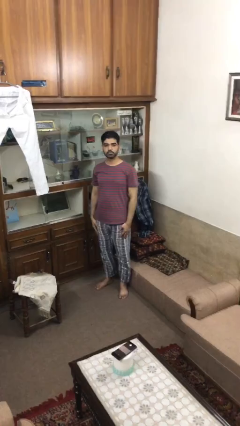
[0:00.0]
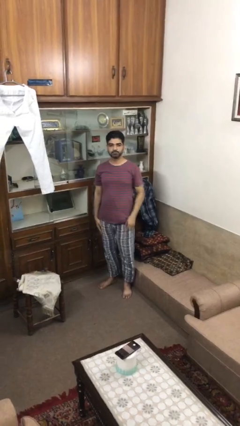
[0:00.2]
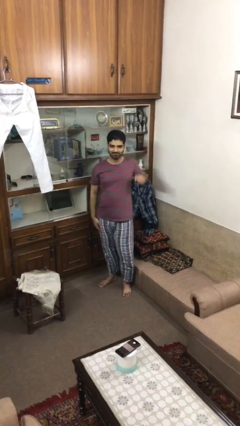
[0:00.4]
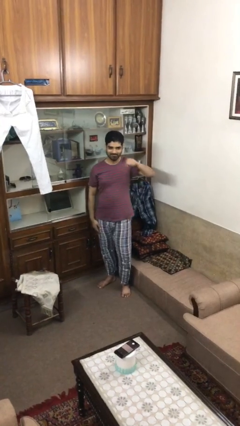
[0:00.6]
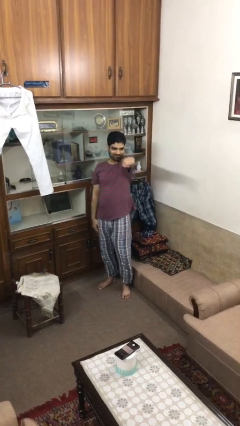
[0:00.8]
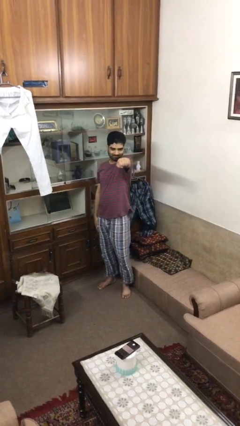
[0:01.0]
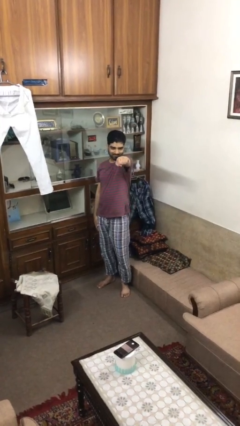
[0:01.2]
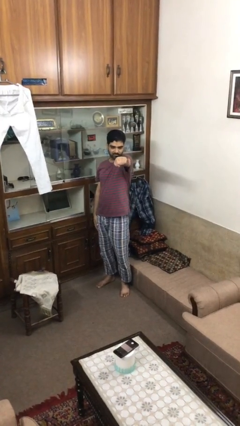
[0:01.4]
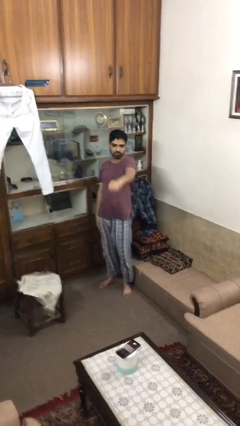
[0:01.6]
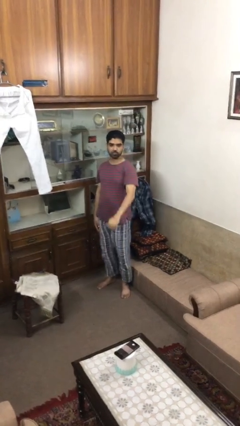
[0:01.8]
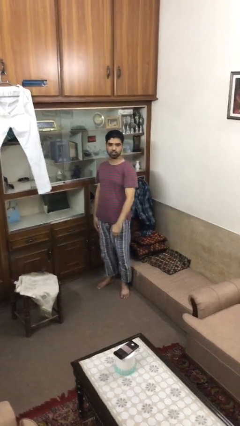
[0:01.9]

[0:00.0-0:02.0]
person punches

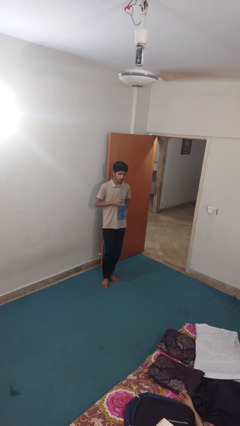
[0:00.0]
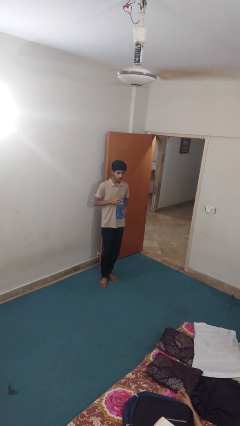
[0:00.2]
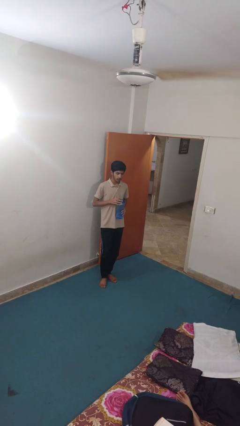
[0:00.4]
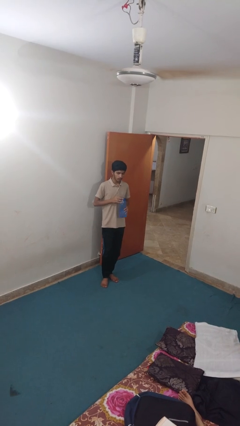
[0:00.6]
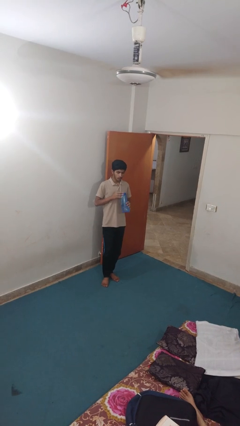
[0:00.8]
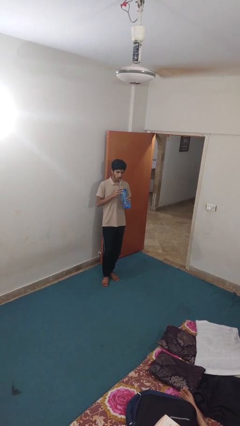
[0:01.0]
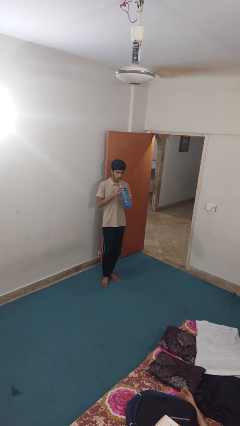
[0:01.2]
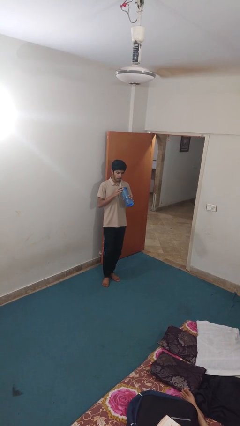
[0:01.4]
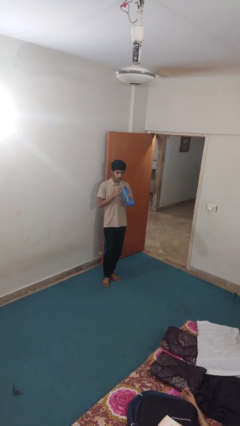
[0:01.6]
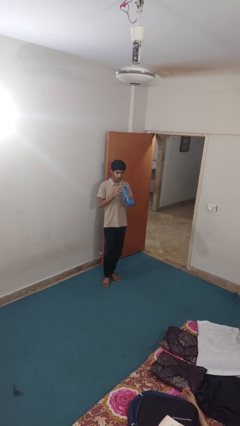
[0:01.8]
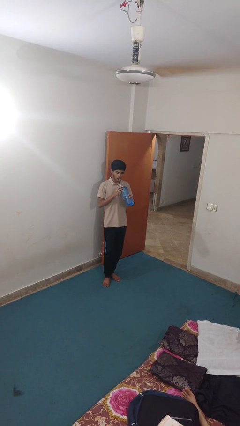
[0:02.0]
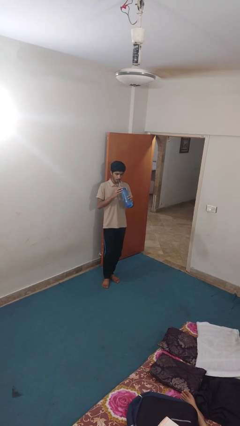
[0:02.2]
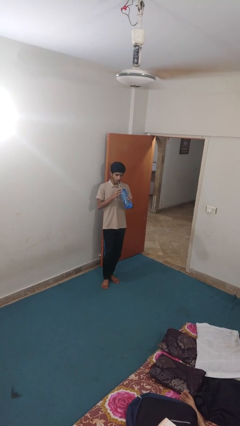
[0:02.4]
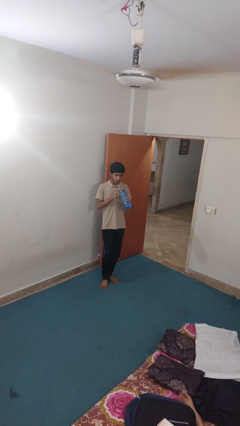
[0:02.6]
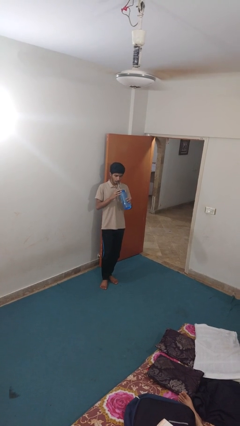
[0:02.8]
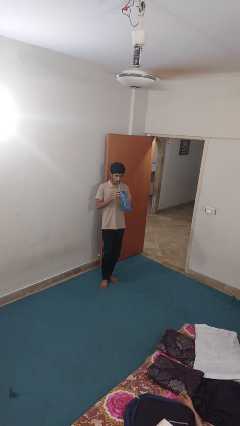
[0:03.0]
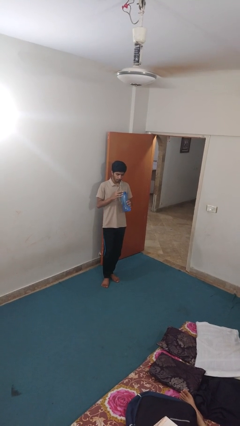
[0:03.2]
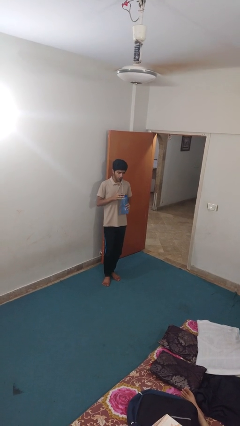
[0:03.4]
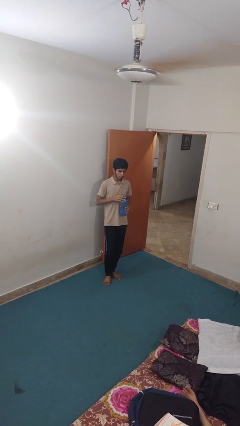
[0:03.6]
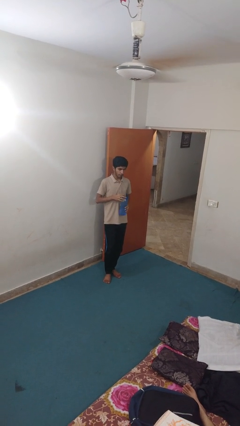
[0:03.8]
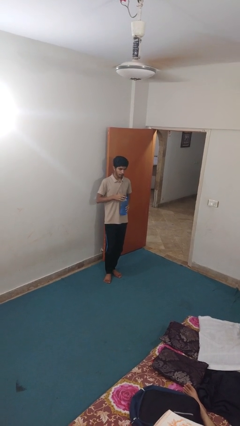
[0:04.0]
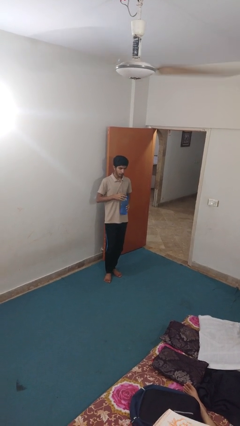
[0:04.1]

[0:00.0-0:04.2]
person drinks from straw

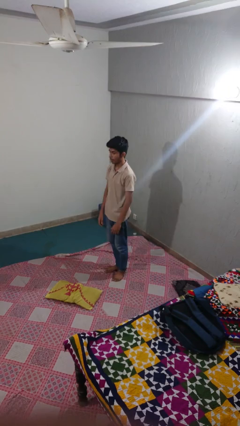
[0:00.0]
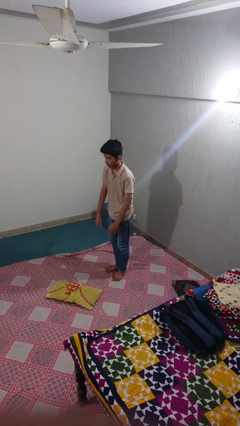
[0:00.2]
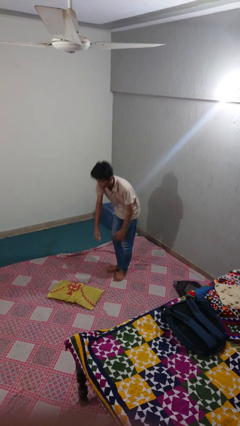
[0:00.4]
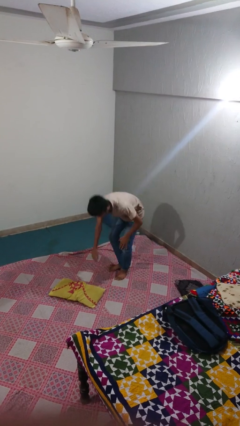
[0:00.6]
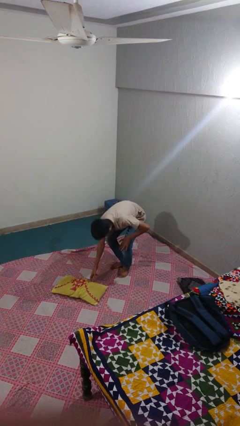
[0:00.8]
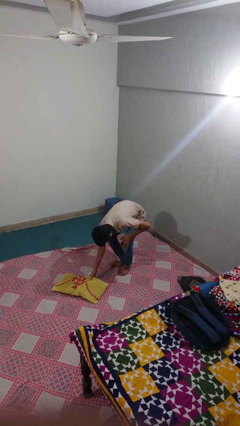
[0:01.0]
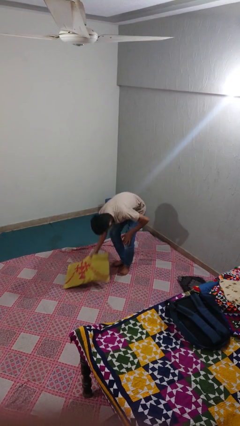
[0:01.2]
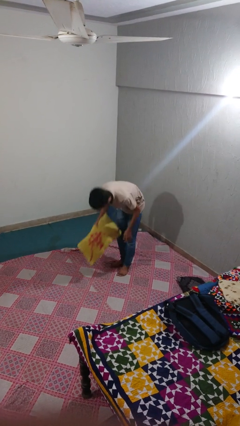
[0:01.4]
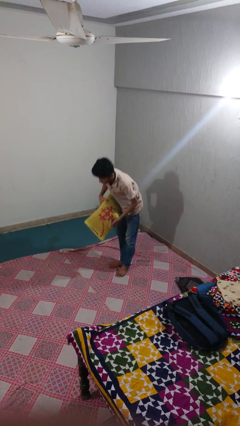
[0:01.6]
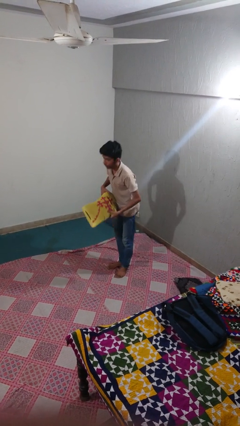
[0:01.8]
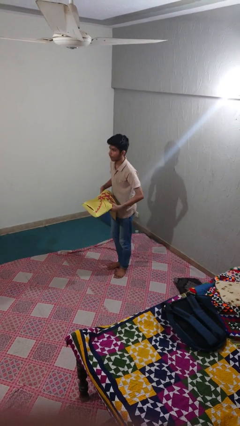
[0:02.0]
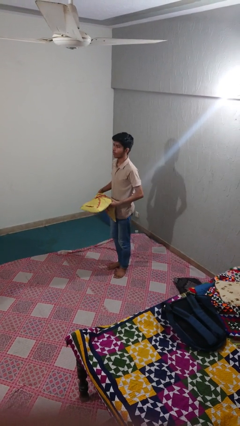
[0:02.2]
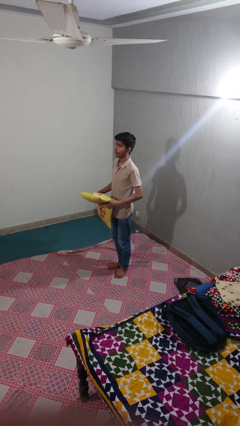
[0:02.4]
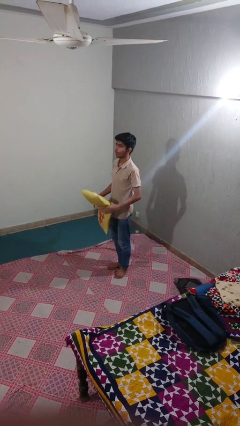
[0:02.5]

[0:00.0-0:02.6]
person picks up object from floor

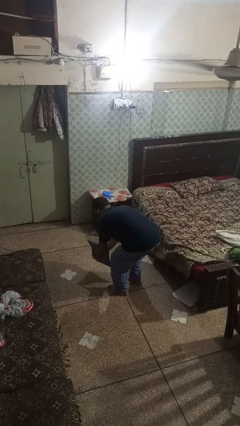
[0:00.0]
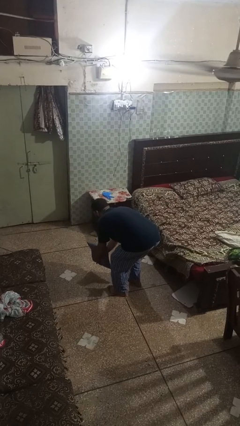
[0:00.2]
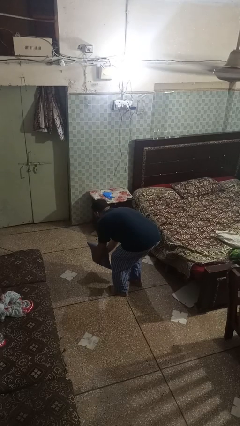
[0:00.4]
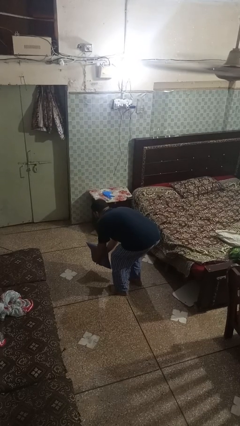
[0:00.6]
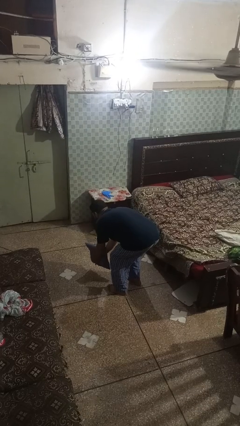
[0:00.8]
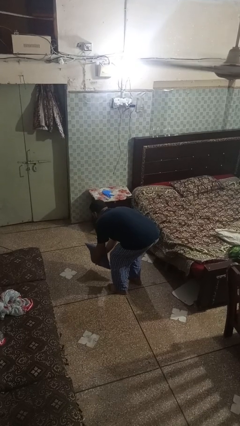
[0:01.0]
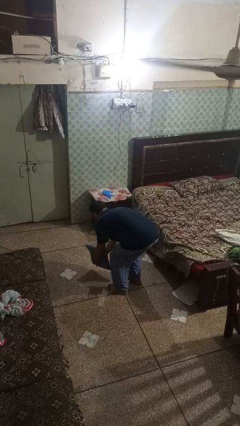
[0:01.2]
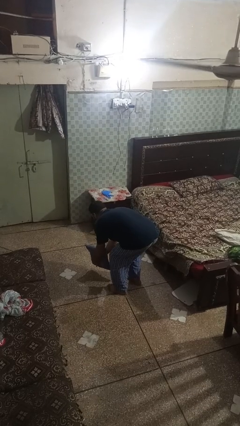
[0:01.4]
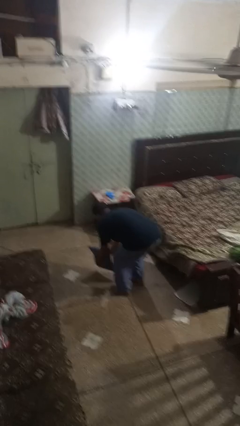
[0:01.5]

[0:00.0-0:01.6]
person catches dropped object

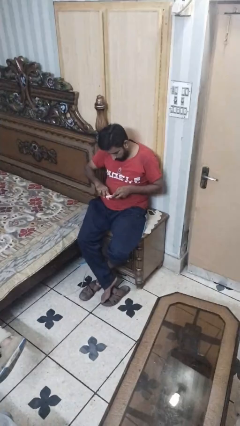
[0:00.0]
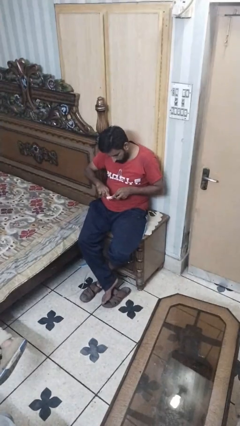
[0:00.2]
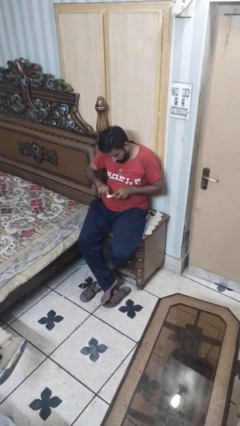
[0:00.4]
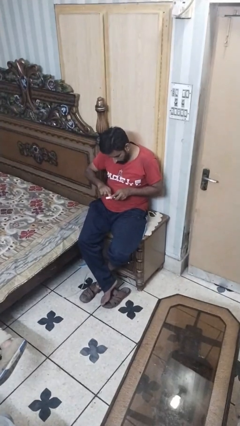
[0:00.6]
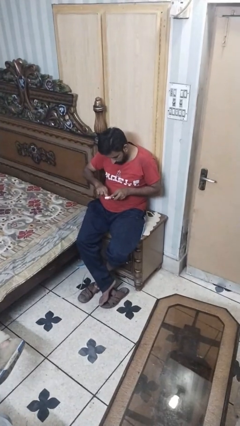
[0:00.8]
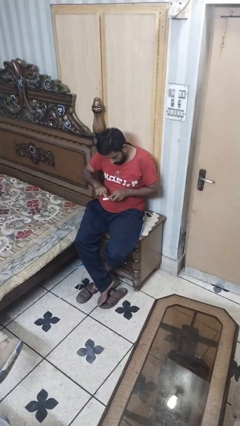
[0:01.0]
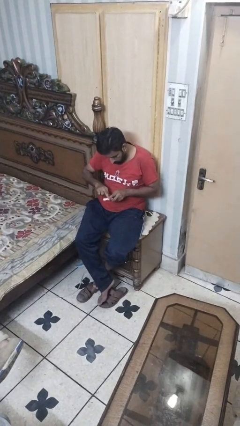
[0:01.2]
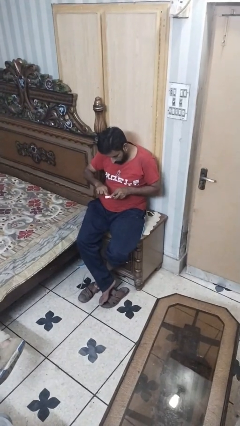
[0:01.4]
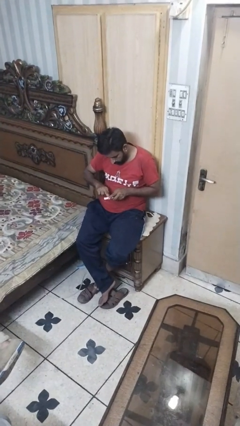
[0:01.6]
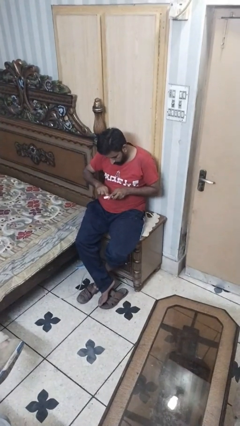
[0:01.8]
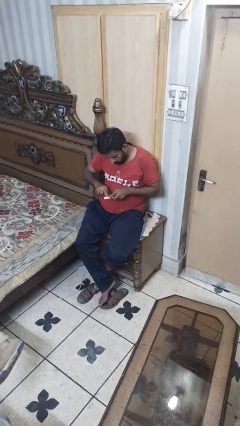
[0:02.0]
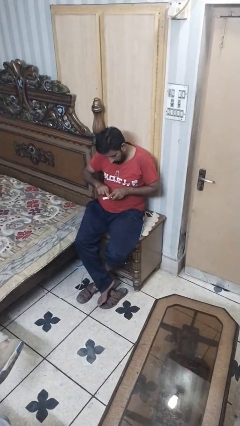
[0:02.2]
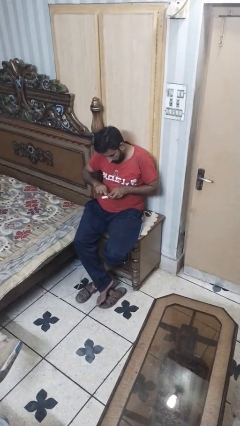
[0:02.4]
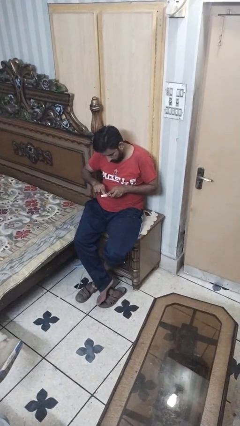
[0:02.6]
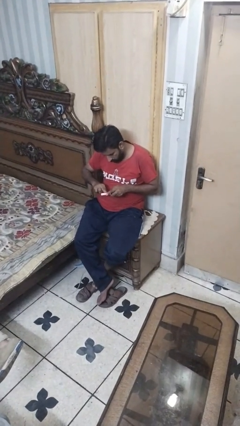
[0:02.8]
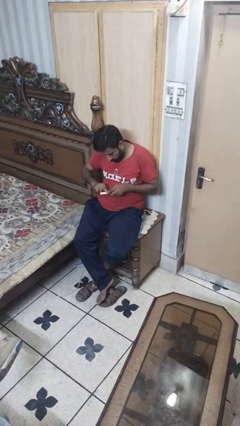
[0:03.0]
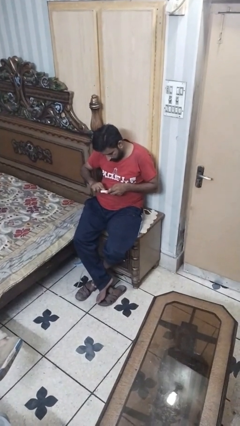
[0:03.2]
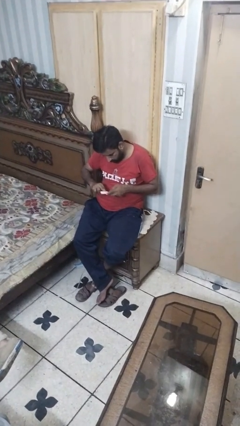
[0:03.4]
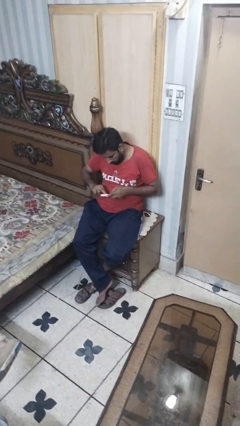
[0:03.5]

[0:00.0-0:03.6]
person files fingernails

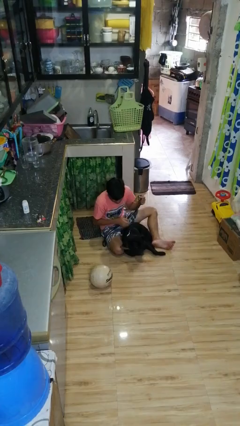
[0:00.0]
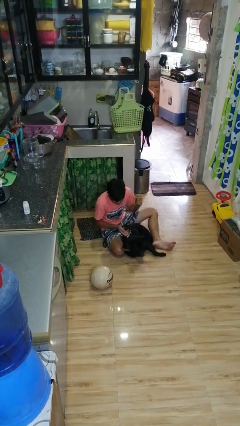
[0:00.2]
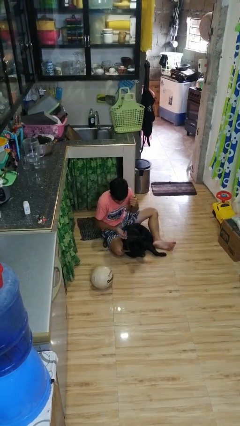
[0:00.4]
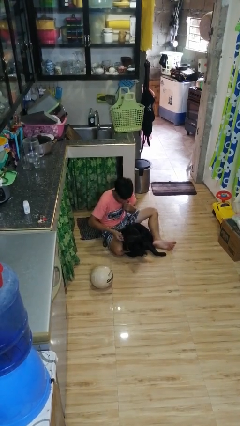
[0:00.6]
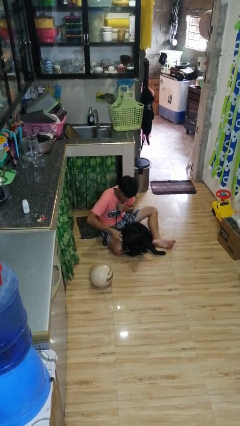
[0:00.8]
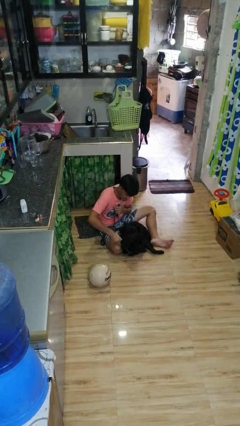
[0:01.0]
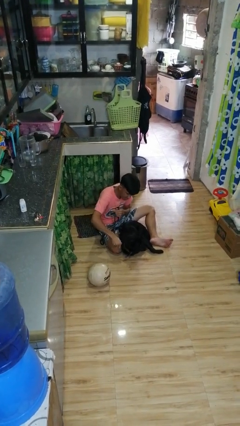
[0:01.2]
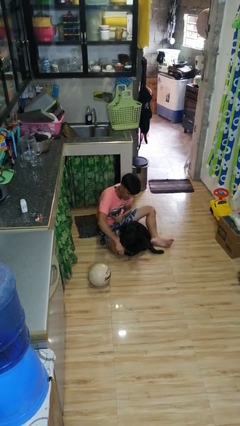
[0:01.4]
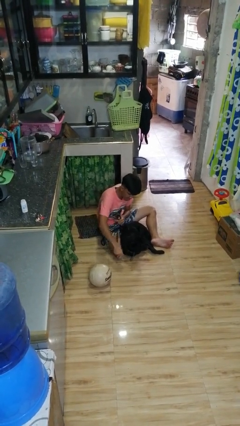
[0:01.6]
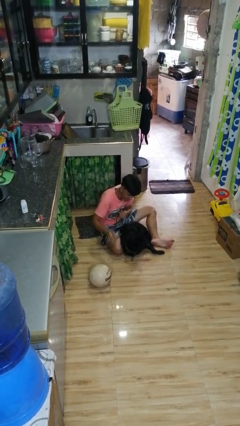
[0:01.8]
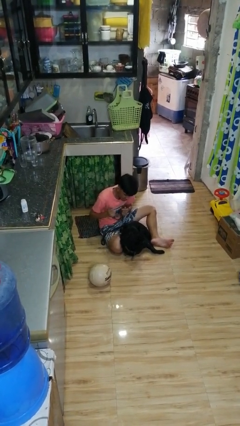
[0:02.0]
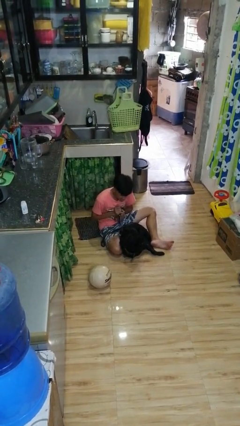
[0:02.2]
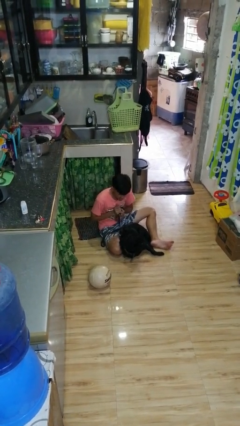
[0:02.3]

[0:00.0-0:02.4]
person unattaches leash from dog

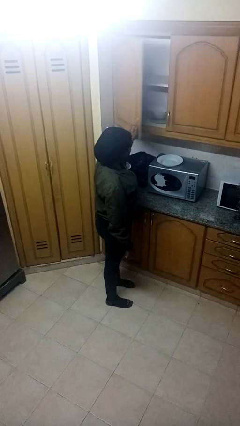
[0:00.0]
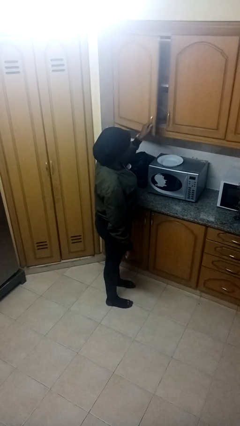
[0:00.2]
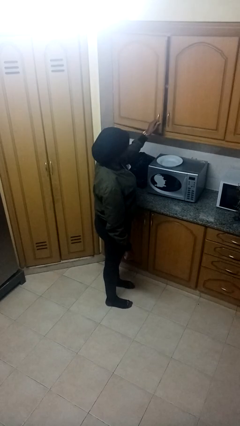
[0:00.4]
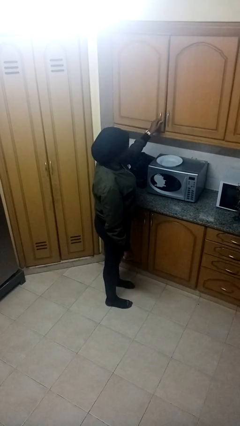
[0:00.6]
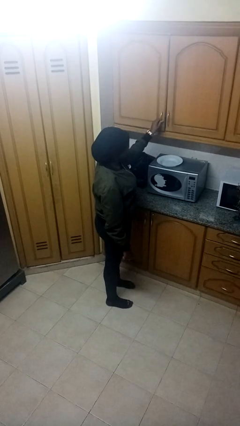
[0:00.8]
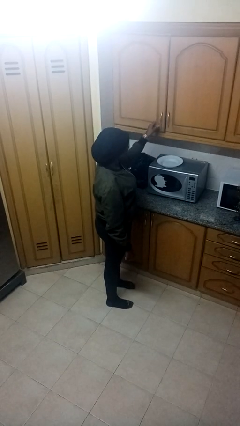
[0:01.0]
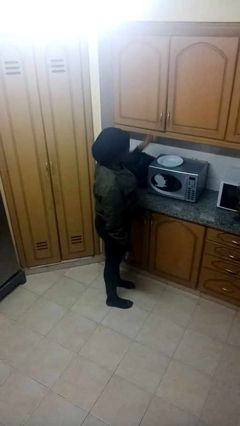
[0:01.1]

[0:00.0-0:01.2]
person closes cabinet
